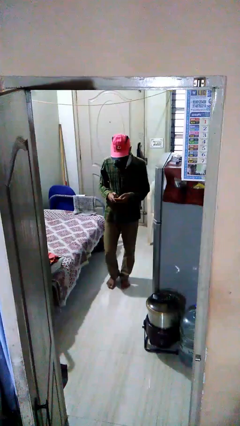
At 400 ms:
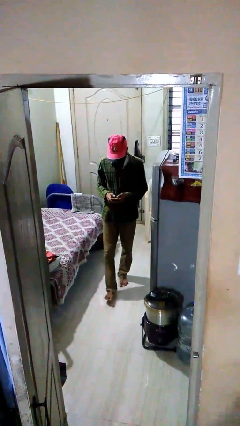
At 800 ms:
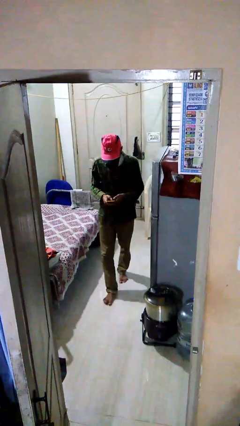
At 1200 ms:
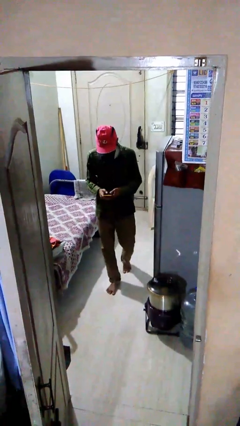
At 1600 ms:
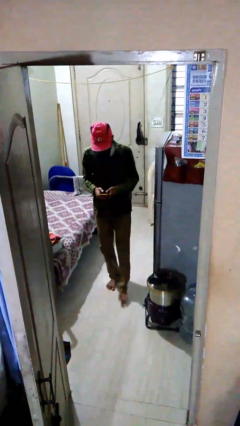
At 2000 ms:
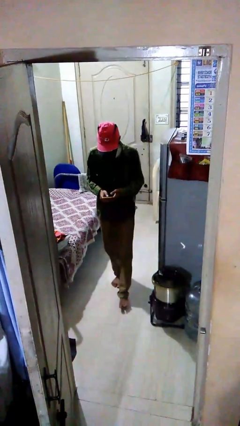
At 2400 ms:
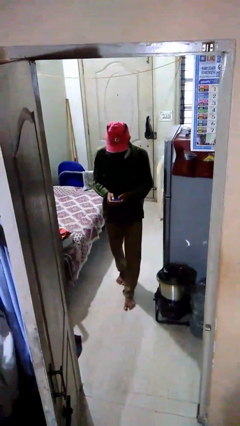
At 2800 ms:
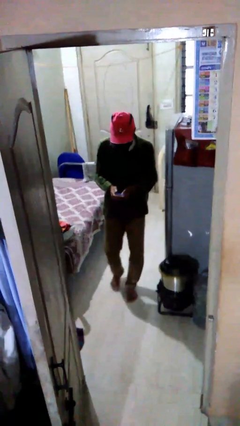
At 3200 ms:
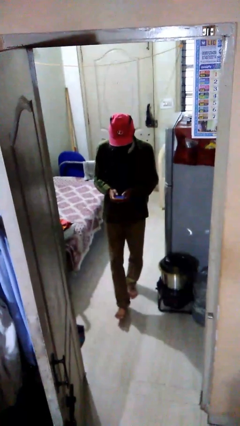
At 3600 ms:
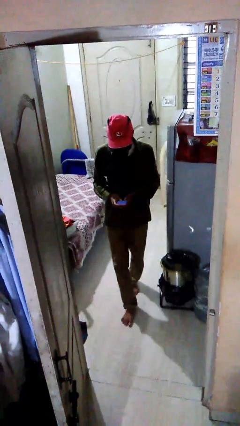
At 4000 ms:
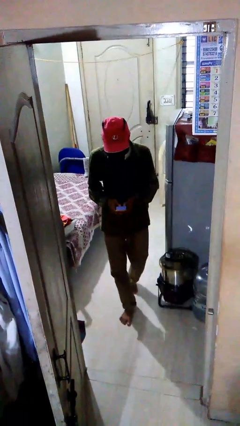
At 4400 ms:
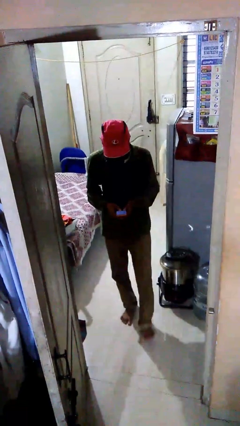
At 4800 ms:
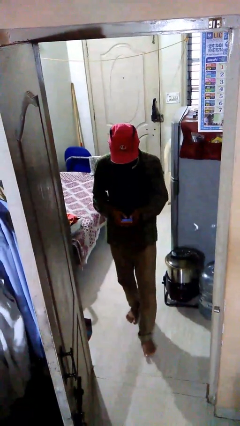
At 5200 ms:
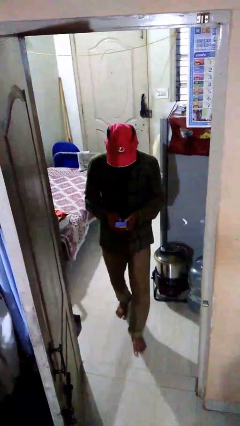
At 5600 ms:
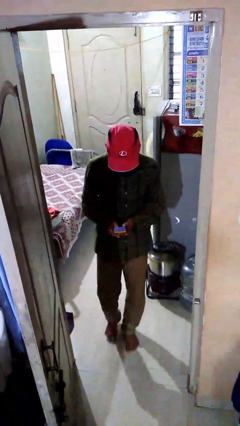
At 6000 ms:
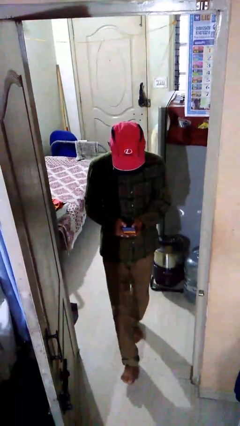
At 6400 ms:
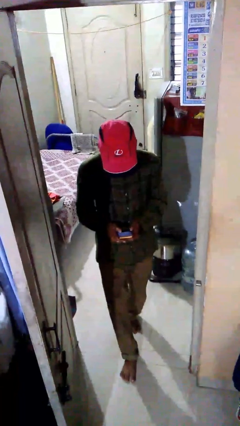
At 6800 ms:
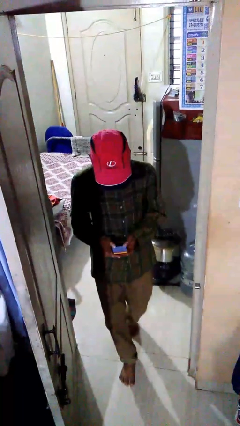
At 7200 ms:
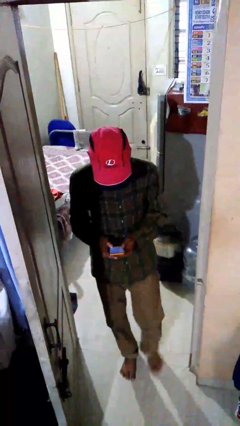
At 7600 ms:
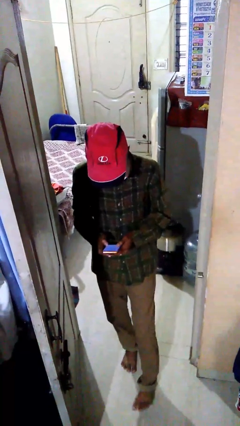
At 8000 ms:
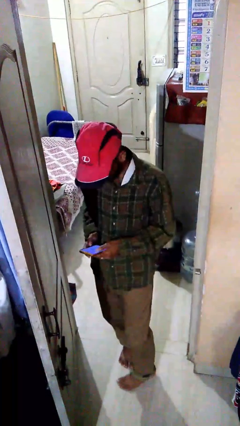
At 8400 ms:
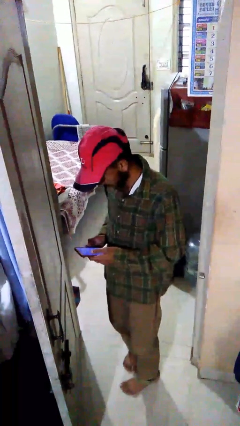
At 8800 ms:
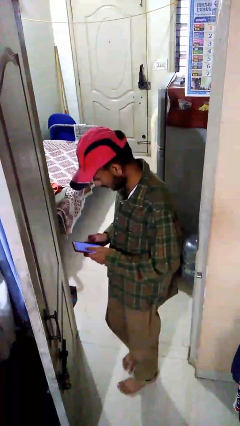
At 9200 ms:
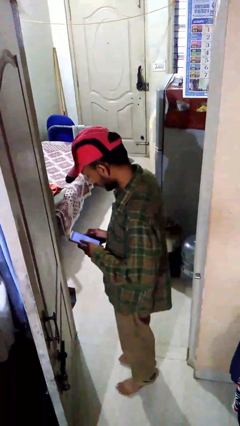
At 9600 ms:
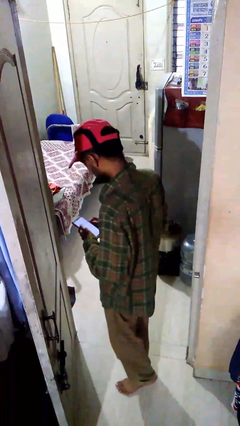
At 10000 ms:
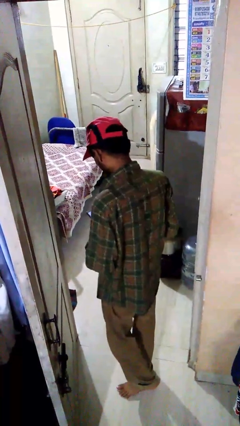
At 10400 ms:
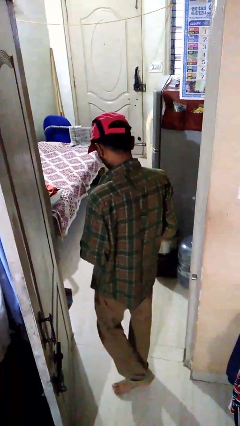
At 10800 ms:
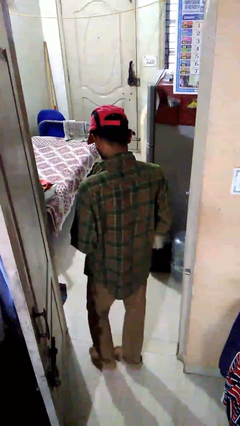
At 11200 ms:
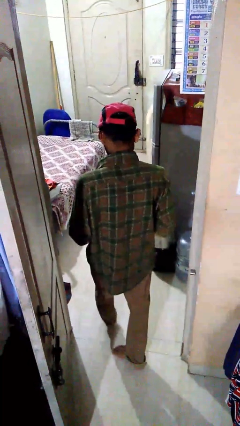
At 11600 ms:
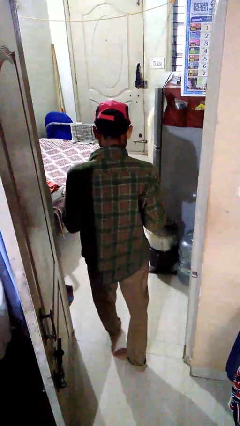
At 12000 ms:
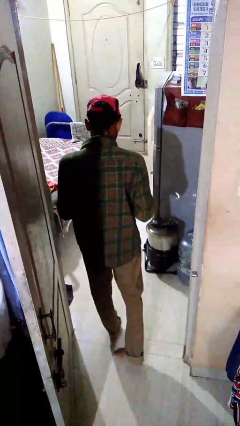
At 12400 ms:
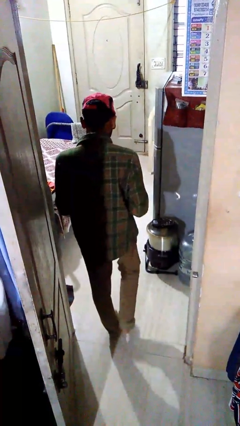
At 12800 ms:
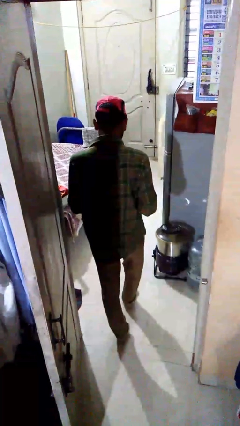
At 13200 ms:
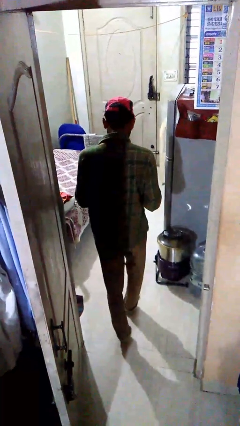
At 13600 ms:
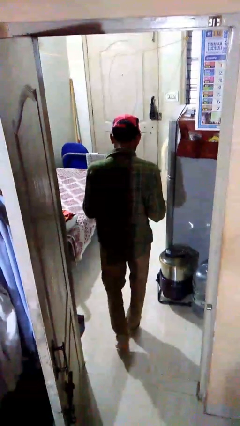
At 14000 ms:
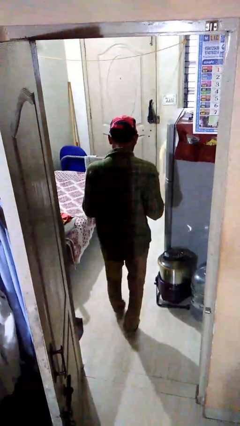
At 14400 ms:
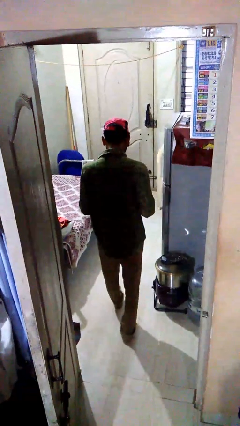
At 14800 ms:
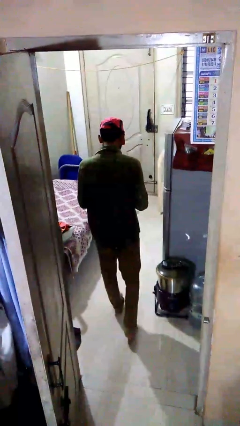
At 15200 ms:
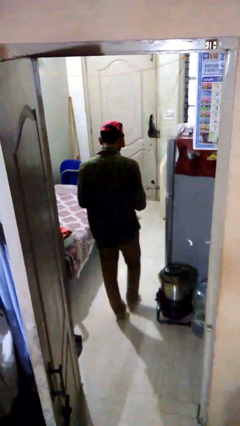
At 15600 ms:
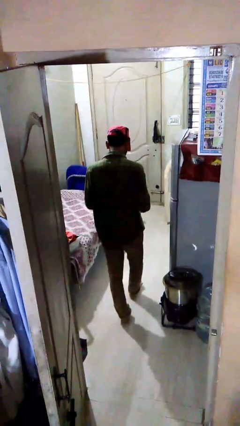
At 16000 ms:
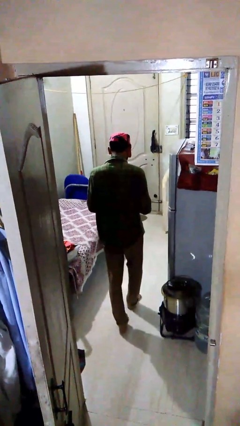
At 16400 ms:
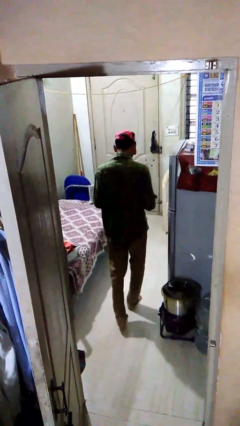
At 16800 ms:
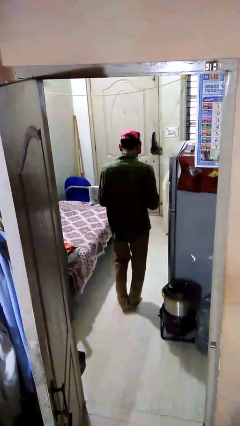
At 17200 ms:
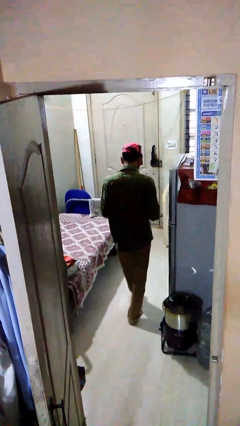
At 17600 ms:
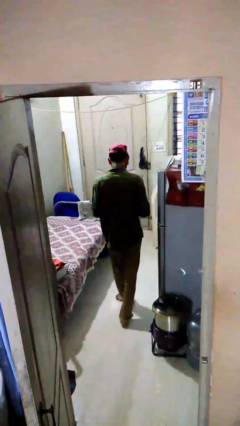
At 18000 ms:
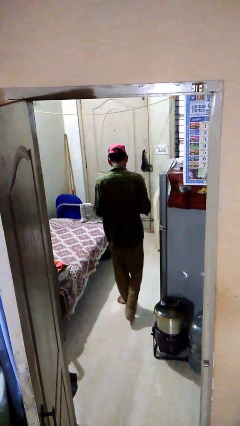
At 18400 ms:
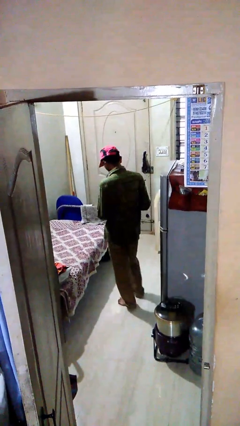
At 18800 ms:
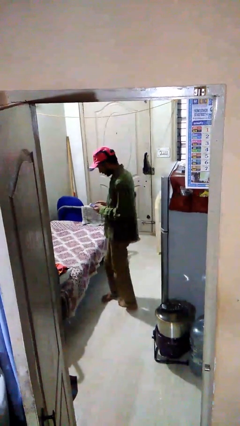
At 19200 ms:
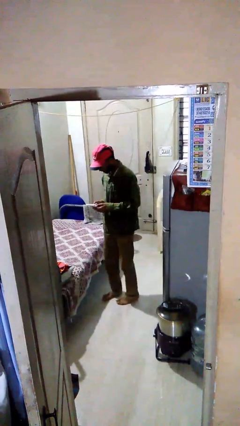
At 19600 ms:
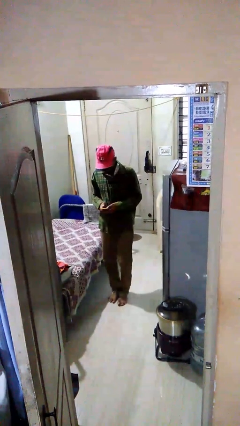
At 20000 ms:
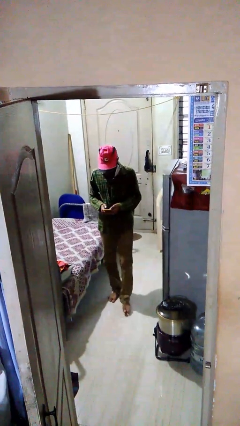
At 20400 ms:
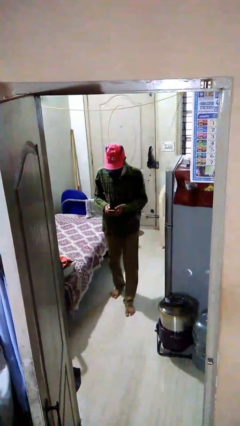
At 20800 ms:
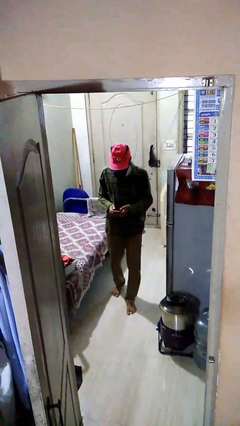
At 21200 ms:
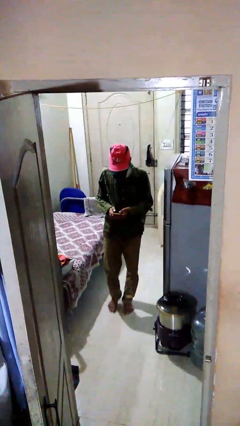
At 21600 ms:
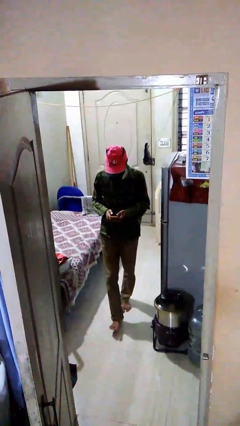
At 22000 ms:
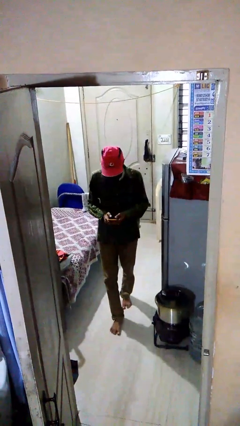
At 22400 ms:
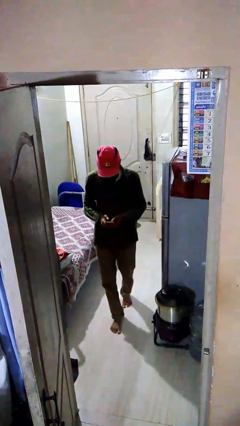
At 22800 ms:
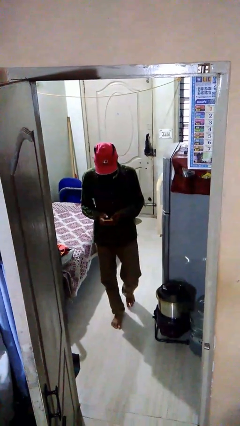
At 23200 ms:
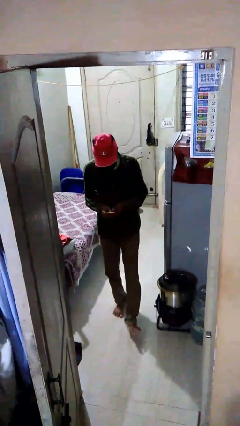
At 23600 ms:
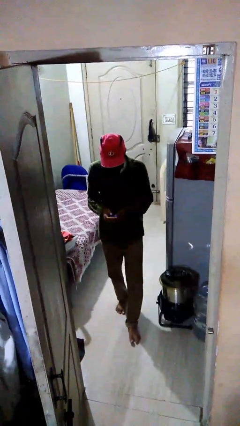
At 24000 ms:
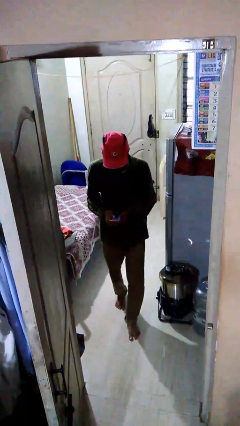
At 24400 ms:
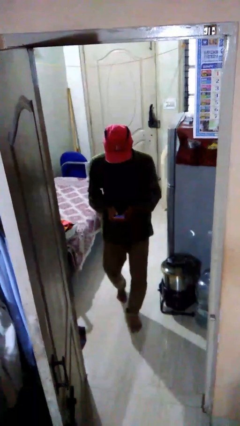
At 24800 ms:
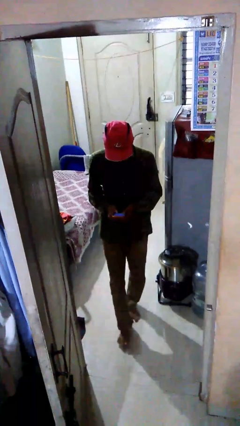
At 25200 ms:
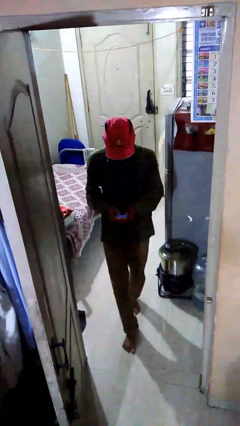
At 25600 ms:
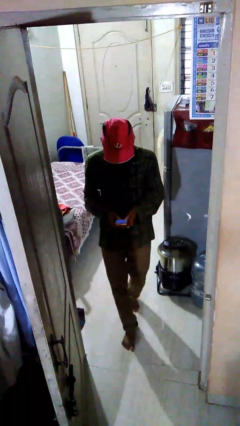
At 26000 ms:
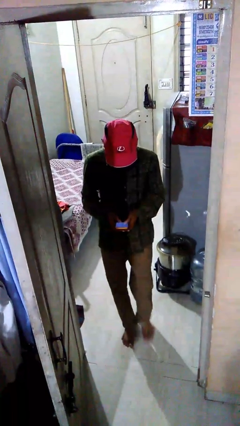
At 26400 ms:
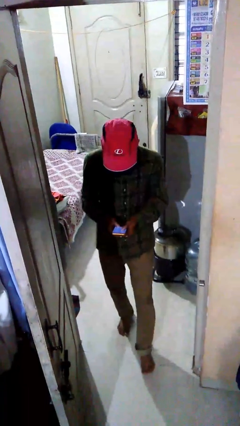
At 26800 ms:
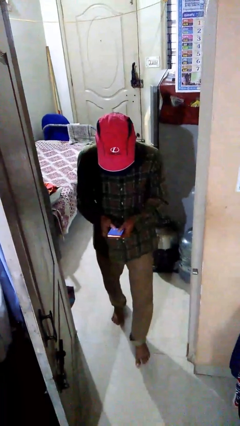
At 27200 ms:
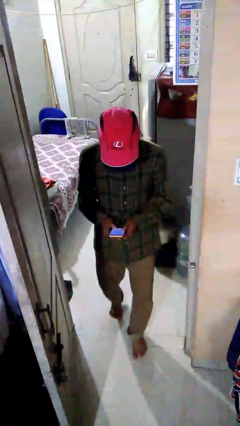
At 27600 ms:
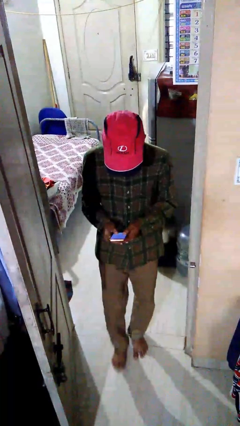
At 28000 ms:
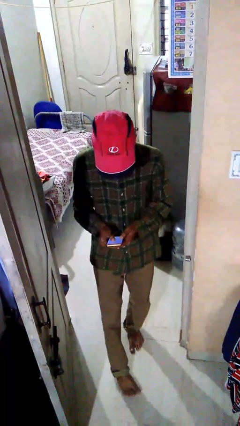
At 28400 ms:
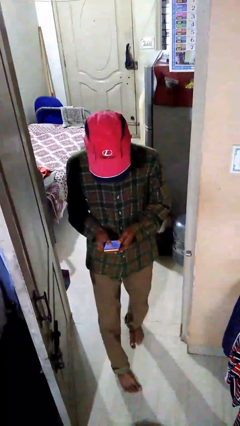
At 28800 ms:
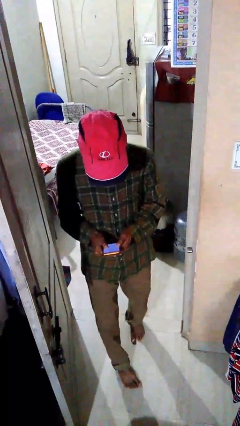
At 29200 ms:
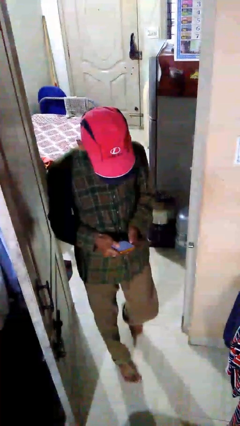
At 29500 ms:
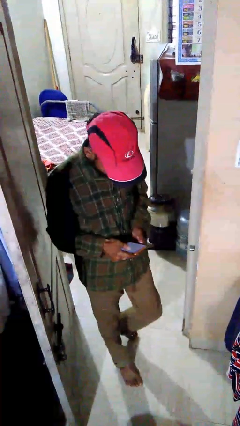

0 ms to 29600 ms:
person enters scene through structure

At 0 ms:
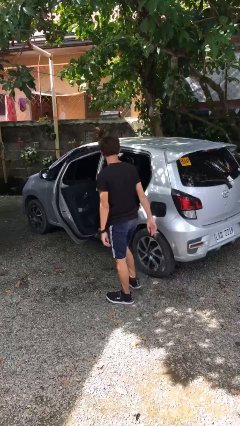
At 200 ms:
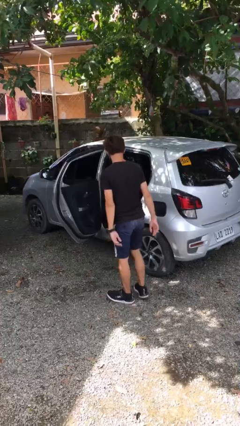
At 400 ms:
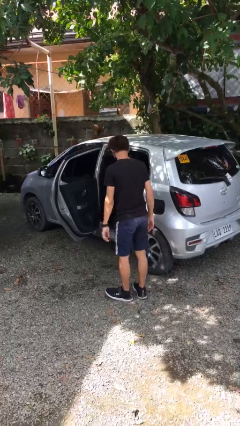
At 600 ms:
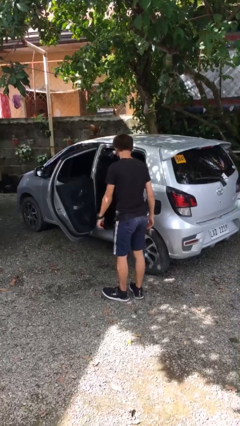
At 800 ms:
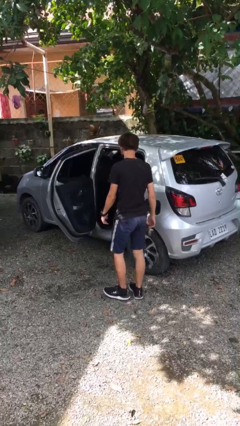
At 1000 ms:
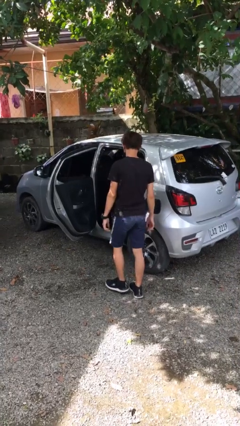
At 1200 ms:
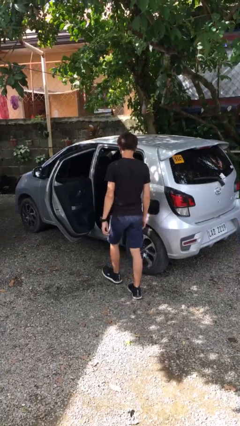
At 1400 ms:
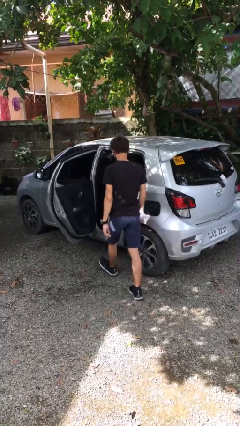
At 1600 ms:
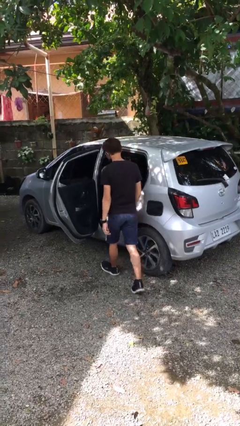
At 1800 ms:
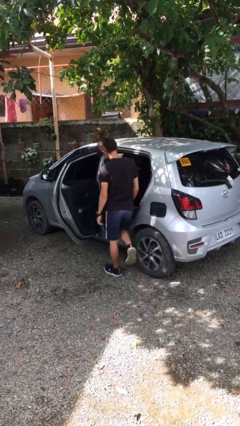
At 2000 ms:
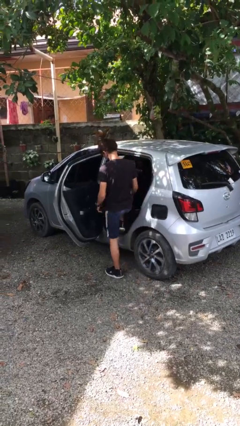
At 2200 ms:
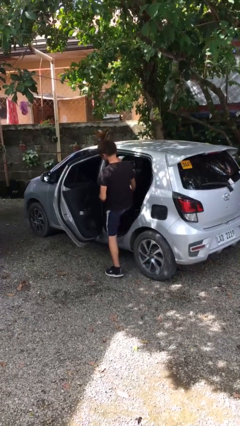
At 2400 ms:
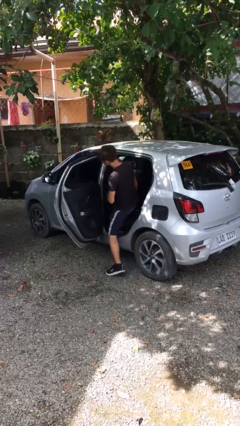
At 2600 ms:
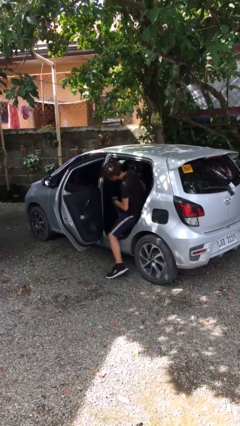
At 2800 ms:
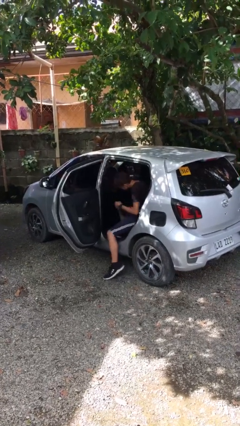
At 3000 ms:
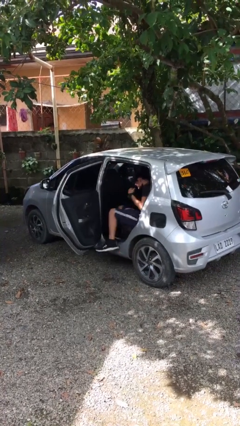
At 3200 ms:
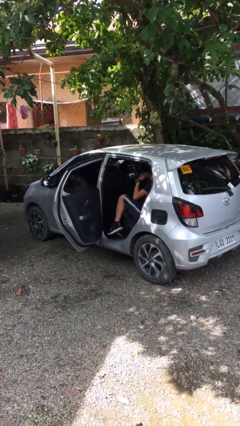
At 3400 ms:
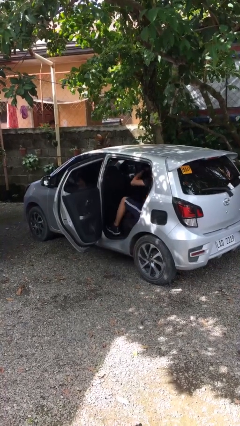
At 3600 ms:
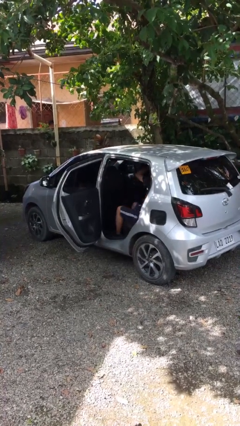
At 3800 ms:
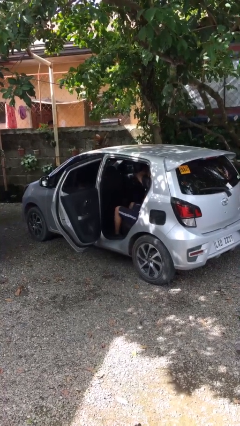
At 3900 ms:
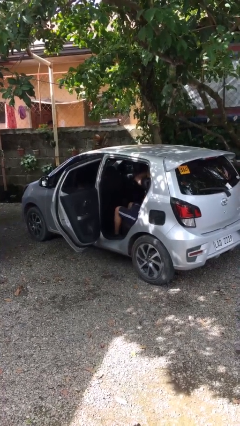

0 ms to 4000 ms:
person enters car
